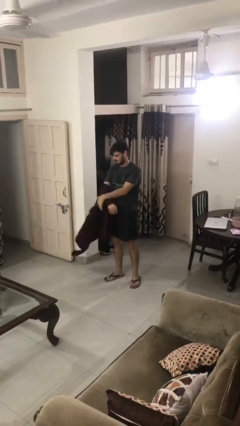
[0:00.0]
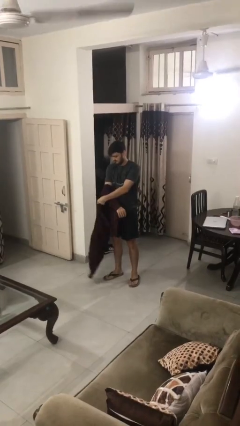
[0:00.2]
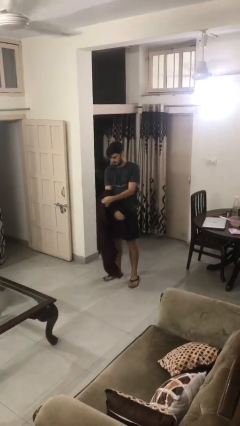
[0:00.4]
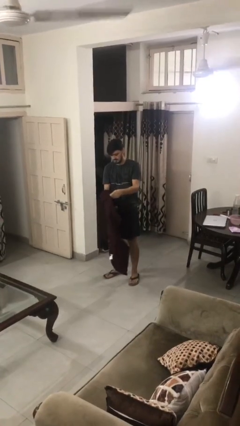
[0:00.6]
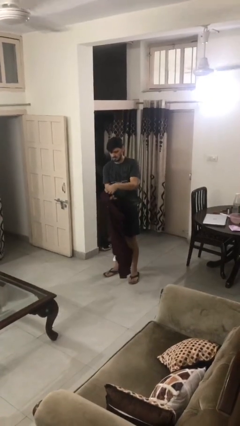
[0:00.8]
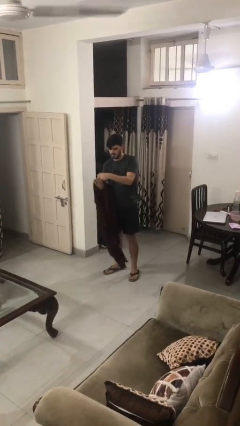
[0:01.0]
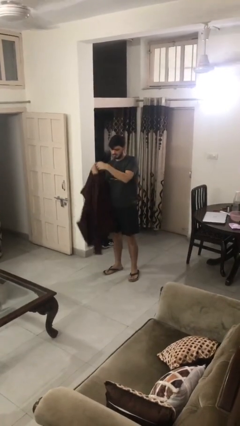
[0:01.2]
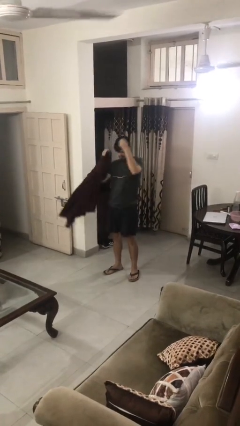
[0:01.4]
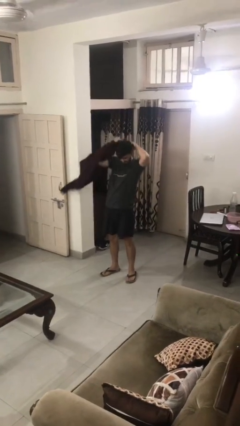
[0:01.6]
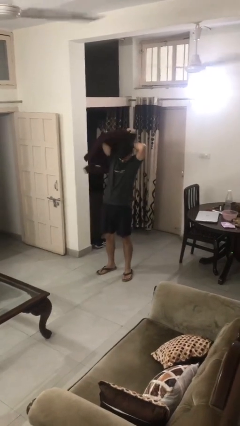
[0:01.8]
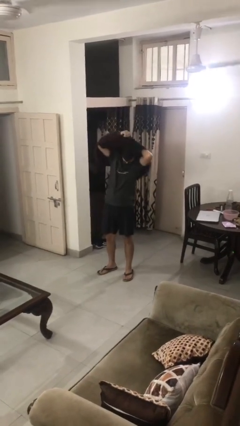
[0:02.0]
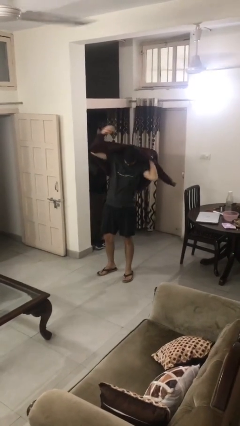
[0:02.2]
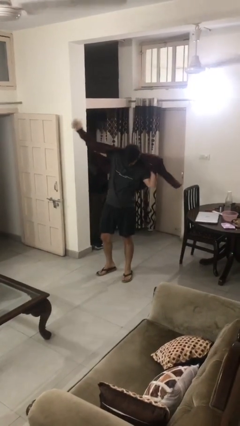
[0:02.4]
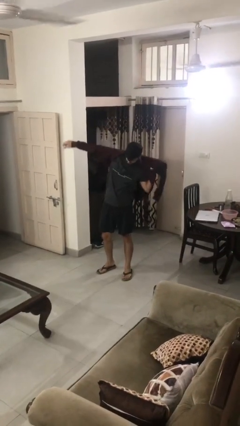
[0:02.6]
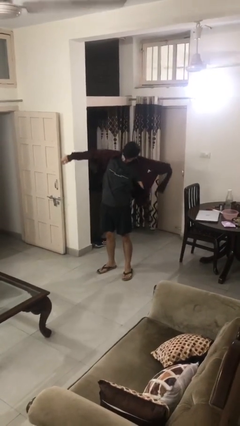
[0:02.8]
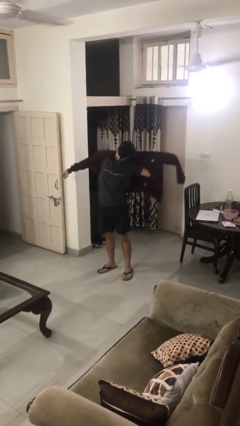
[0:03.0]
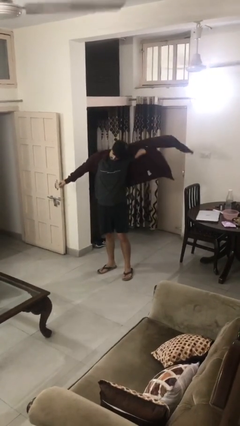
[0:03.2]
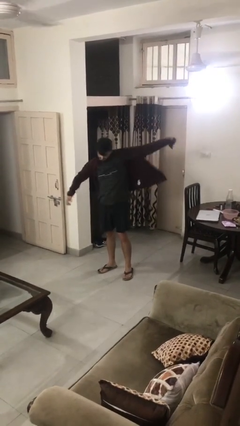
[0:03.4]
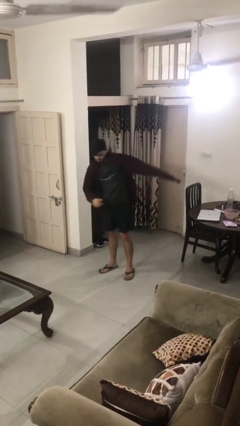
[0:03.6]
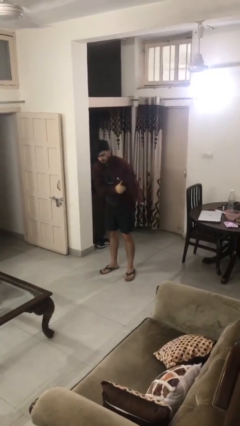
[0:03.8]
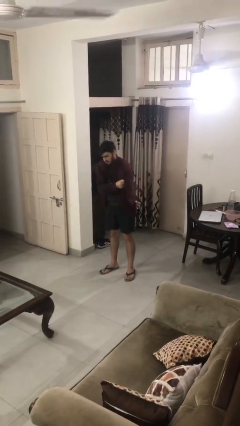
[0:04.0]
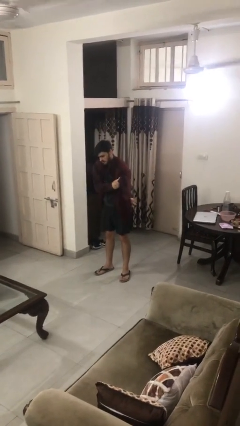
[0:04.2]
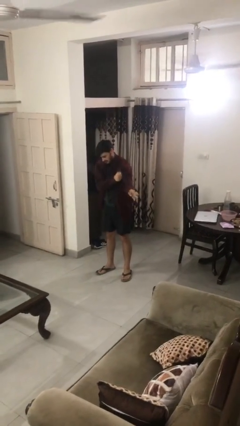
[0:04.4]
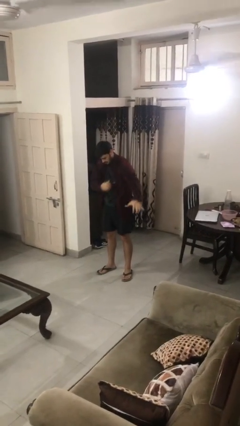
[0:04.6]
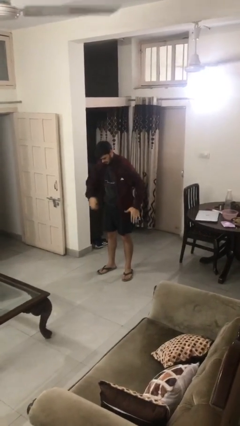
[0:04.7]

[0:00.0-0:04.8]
person puts on jacket

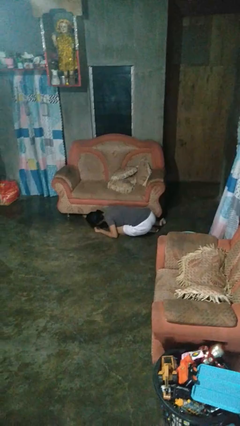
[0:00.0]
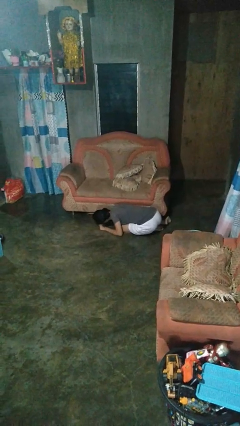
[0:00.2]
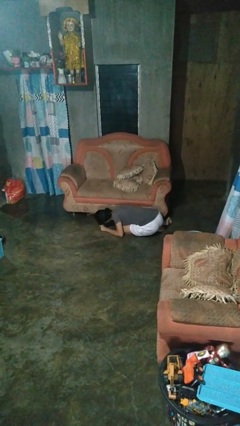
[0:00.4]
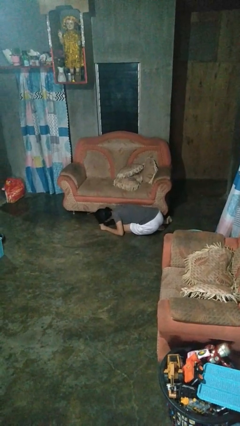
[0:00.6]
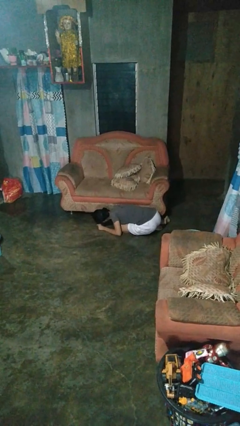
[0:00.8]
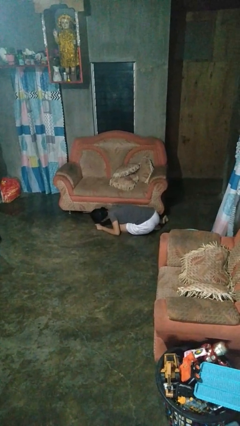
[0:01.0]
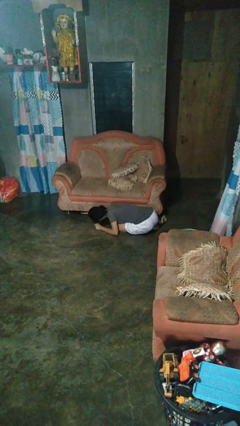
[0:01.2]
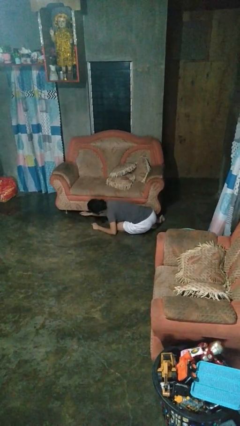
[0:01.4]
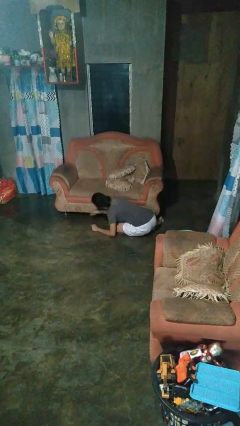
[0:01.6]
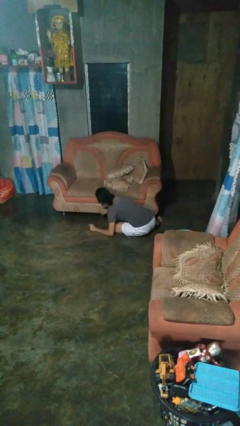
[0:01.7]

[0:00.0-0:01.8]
person searches under couch

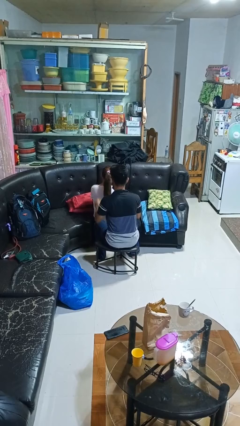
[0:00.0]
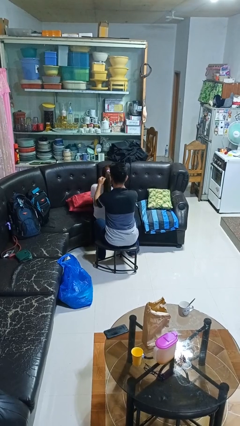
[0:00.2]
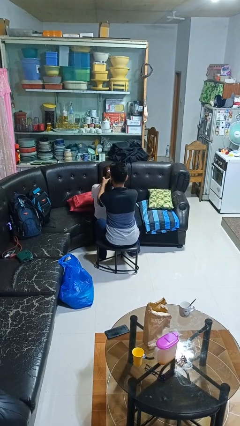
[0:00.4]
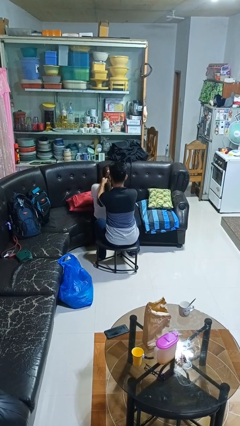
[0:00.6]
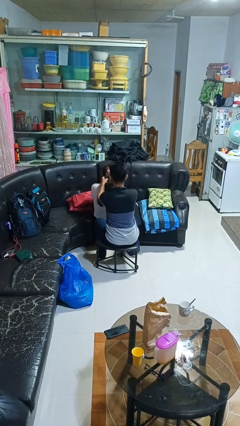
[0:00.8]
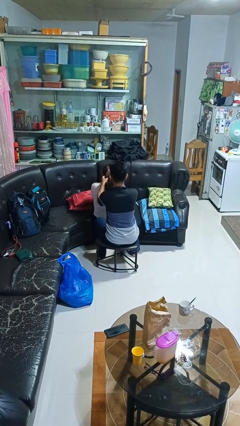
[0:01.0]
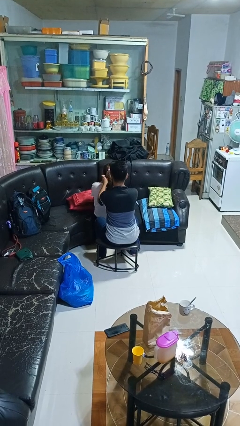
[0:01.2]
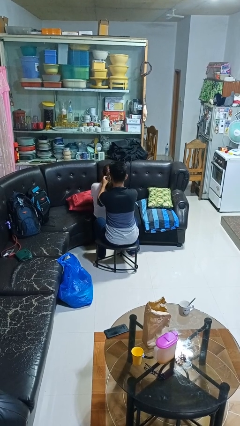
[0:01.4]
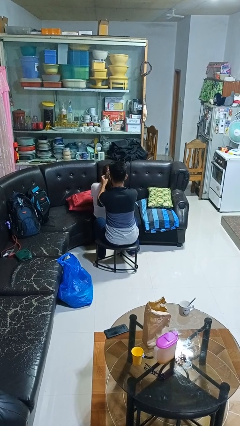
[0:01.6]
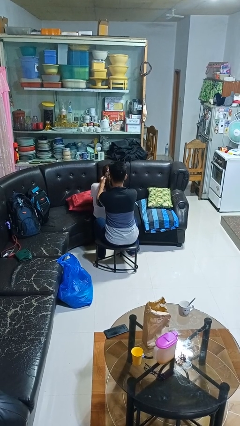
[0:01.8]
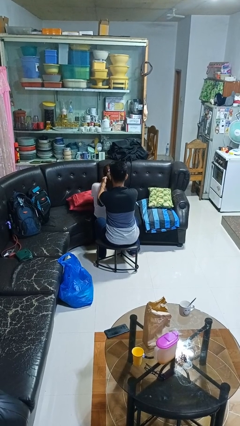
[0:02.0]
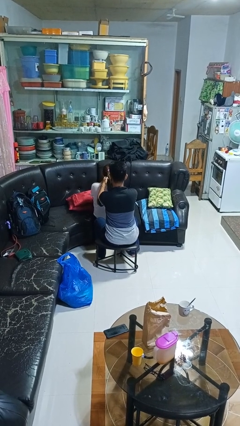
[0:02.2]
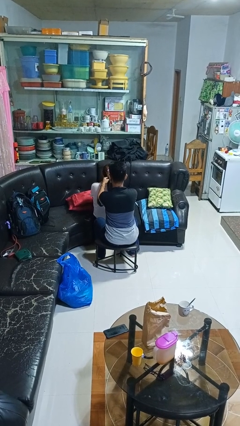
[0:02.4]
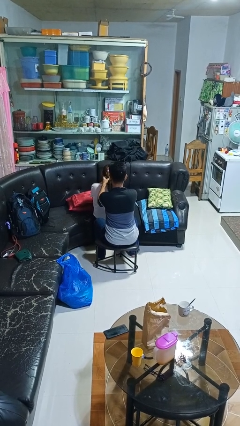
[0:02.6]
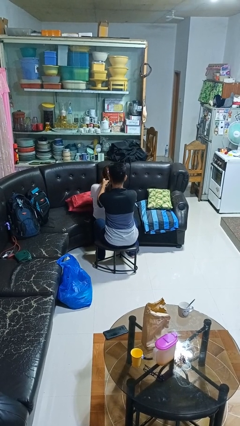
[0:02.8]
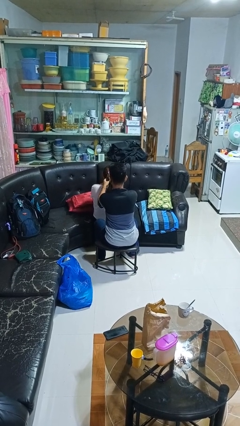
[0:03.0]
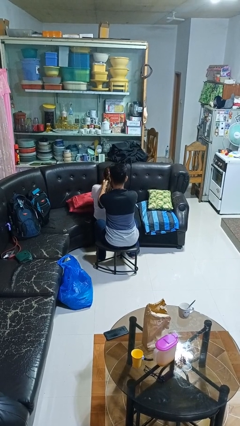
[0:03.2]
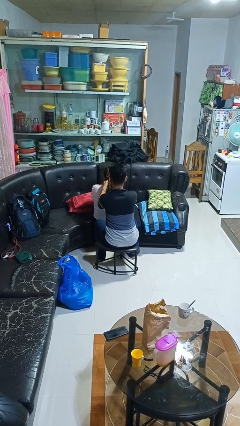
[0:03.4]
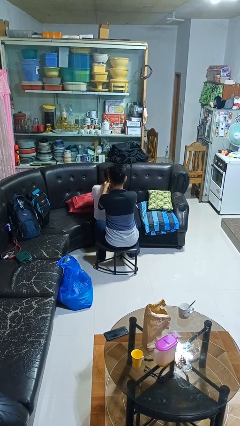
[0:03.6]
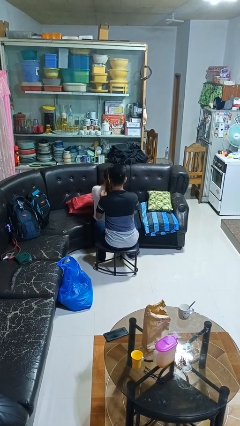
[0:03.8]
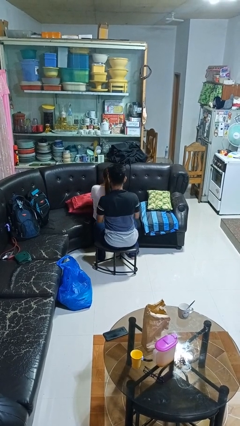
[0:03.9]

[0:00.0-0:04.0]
person braids hair of person

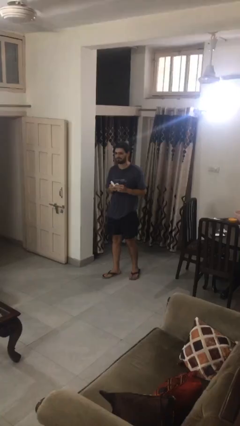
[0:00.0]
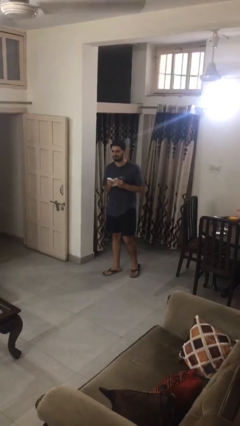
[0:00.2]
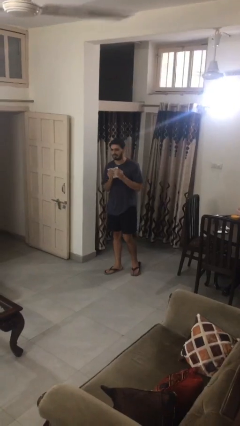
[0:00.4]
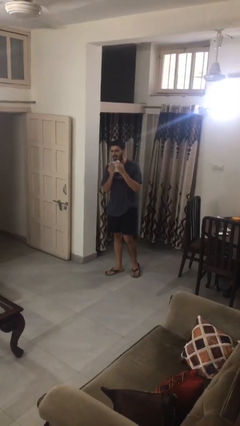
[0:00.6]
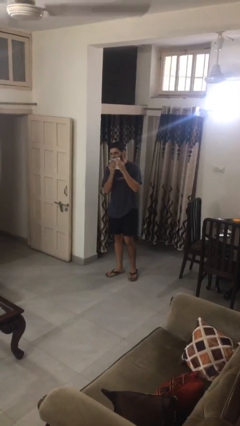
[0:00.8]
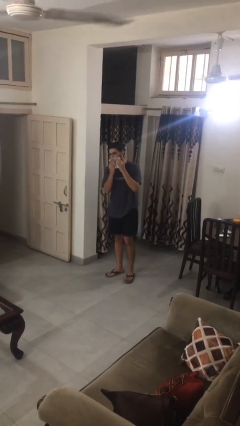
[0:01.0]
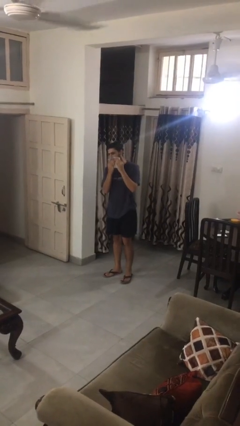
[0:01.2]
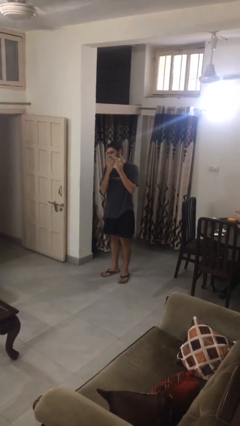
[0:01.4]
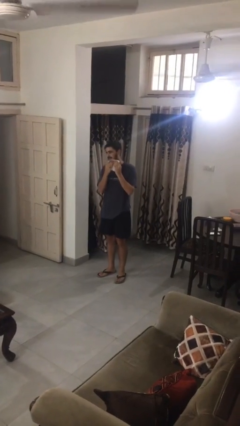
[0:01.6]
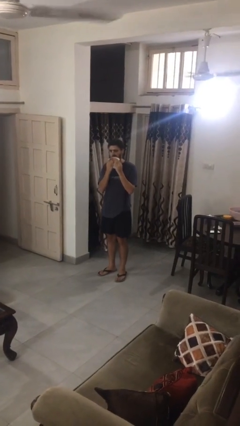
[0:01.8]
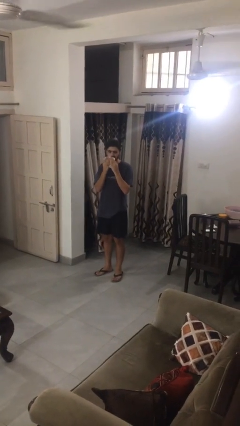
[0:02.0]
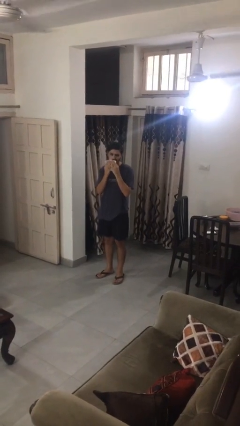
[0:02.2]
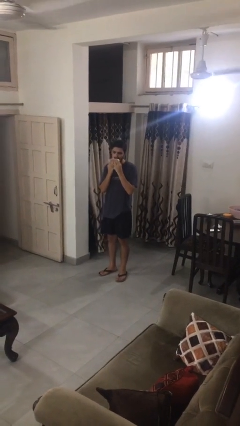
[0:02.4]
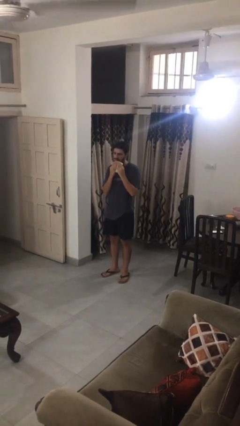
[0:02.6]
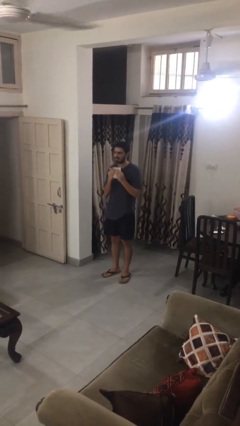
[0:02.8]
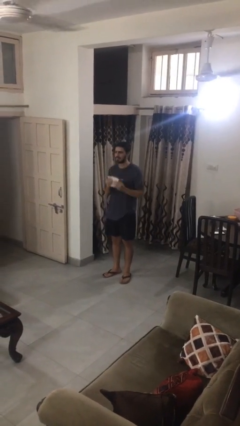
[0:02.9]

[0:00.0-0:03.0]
person wipes mouth with napkin

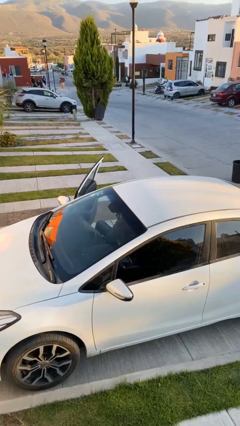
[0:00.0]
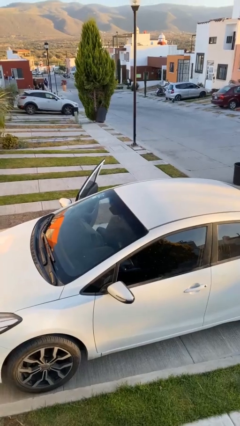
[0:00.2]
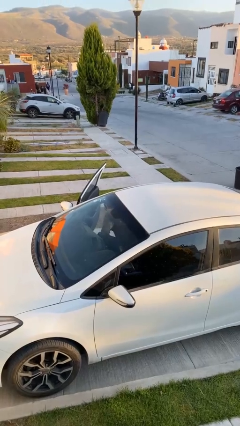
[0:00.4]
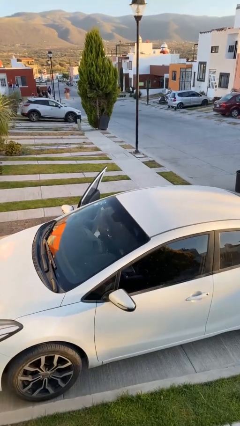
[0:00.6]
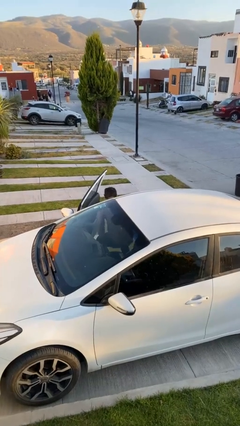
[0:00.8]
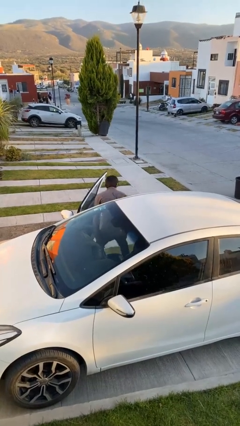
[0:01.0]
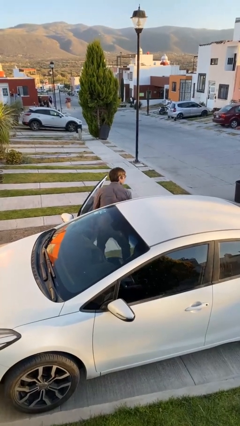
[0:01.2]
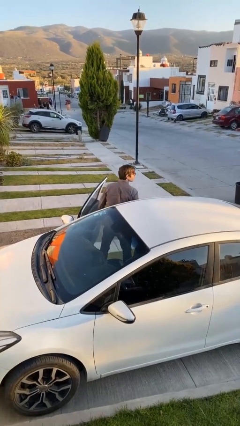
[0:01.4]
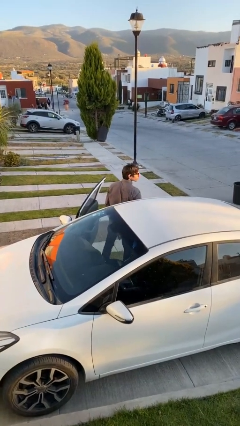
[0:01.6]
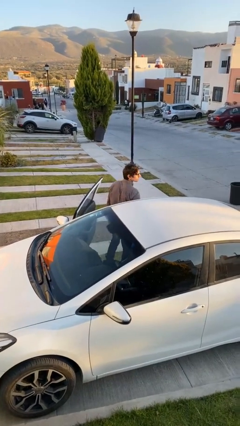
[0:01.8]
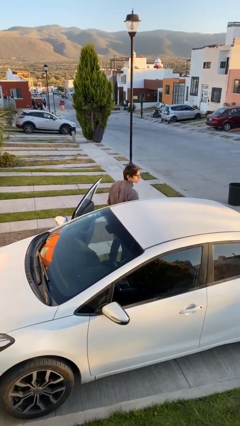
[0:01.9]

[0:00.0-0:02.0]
person exits car

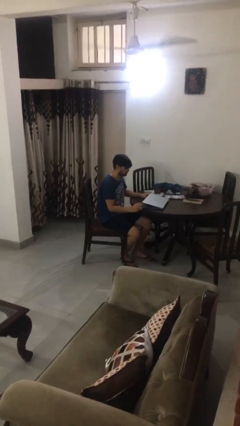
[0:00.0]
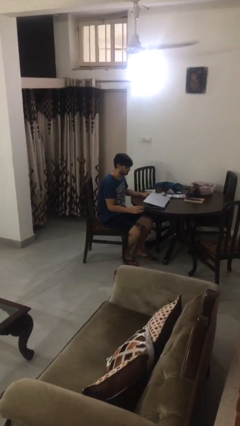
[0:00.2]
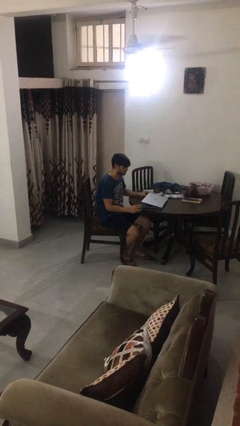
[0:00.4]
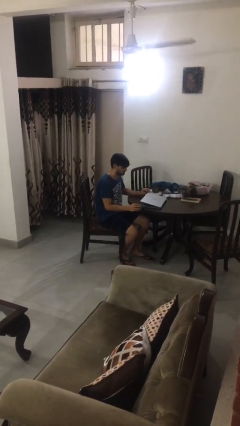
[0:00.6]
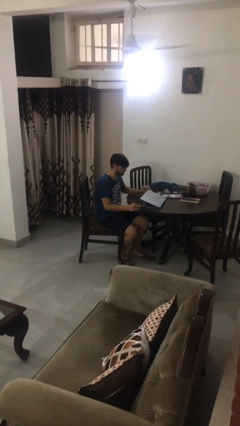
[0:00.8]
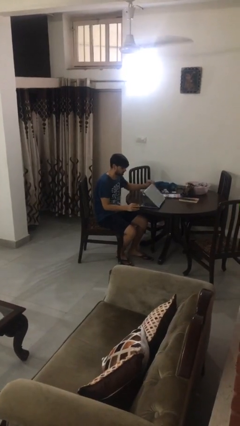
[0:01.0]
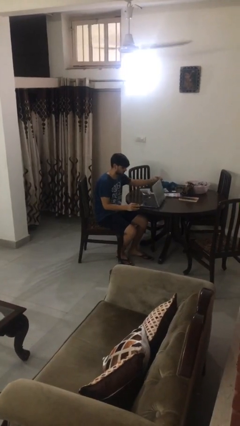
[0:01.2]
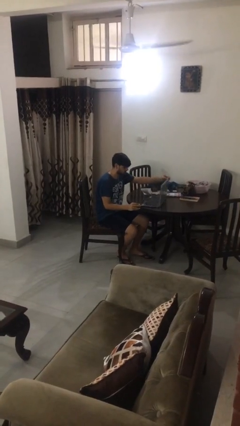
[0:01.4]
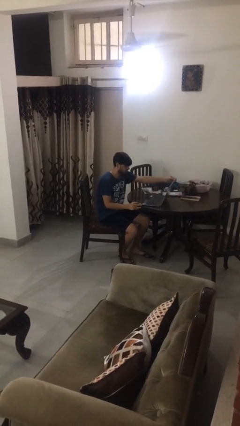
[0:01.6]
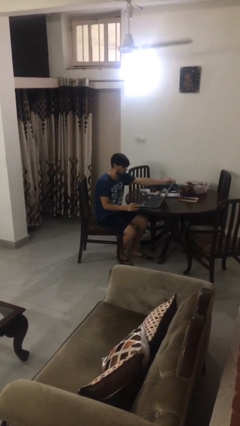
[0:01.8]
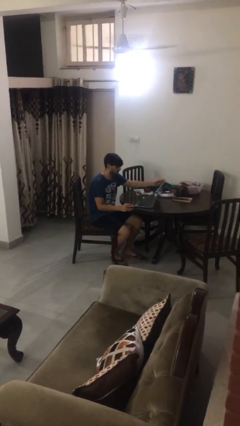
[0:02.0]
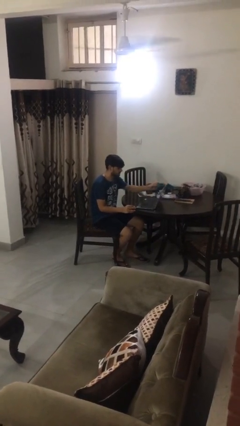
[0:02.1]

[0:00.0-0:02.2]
person opens laptop
